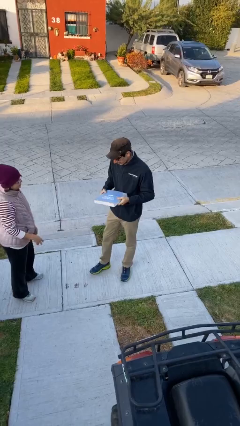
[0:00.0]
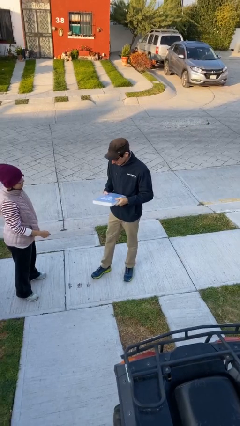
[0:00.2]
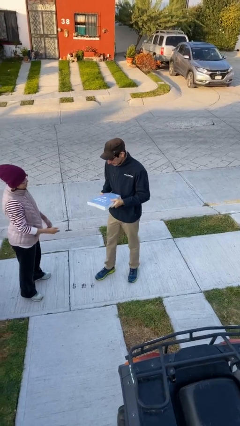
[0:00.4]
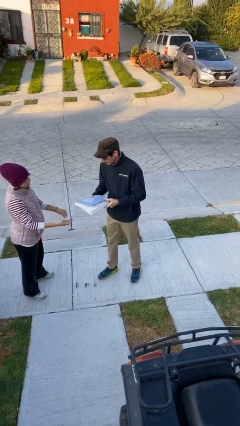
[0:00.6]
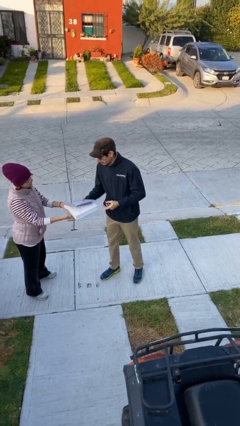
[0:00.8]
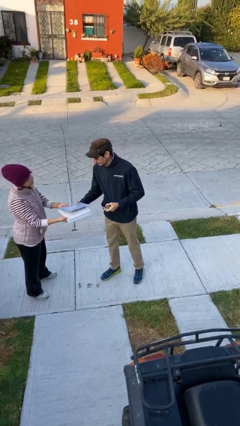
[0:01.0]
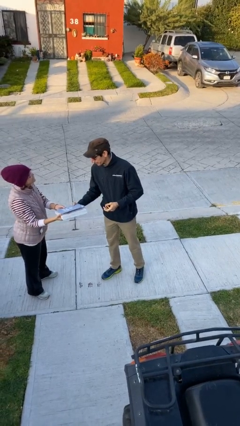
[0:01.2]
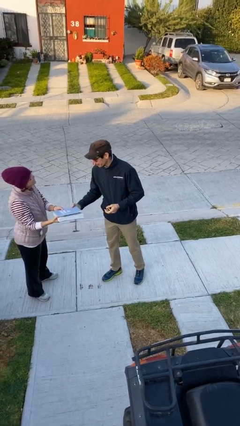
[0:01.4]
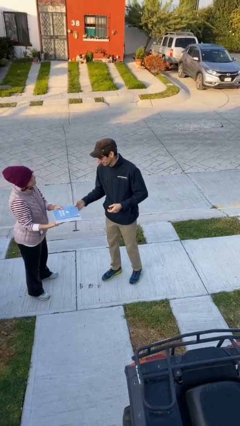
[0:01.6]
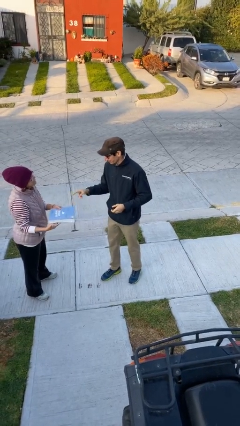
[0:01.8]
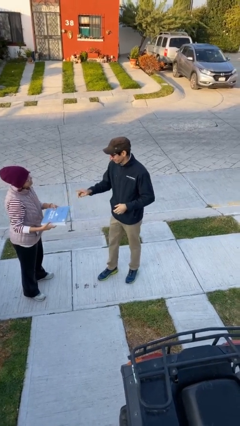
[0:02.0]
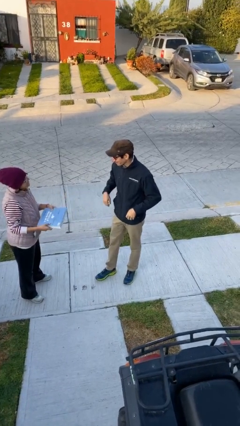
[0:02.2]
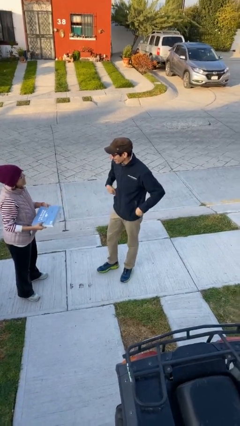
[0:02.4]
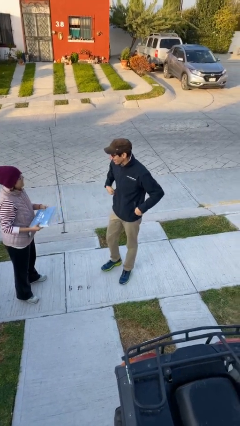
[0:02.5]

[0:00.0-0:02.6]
person transfers object to person

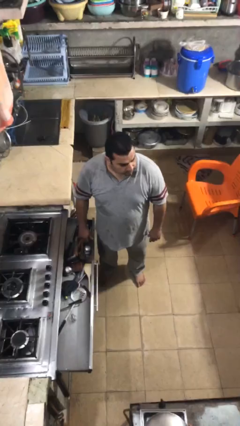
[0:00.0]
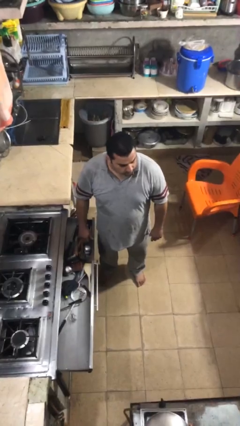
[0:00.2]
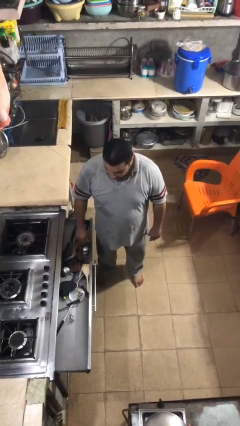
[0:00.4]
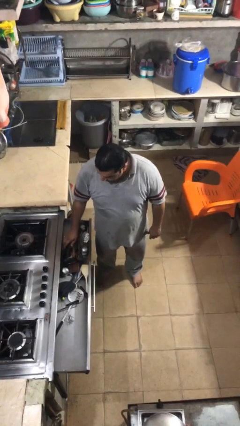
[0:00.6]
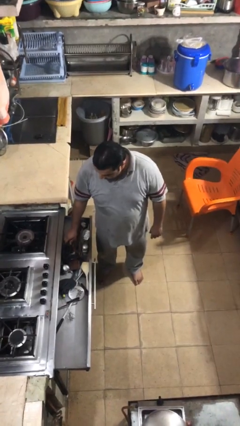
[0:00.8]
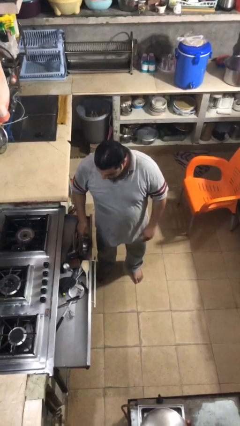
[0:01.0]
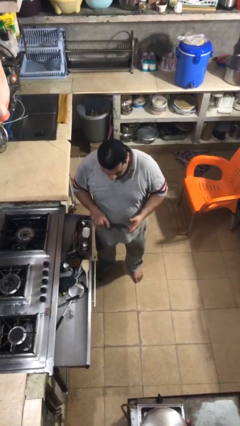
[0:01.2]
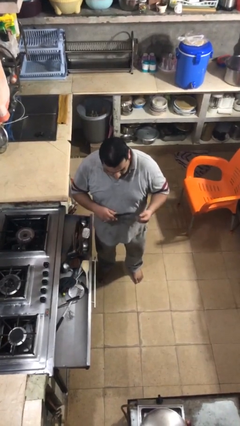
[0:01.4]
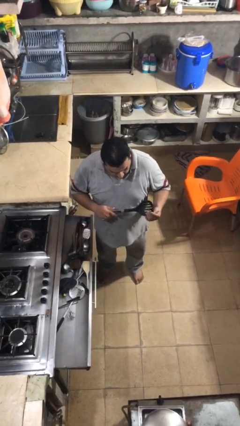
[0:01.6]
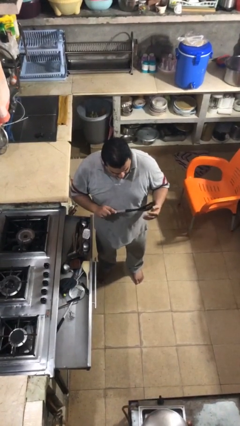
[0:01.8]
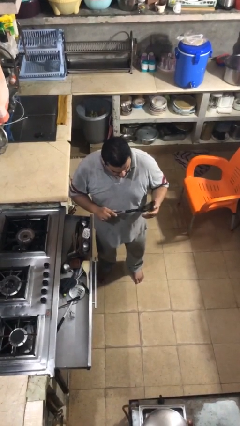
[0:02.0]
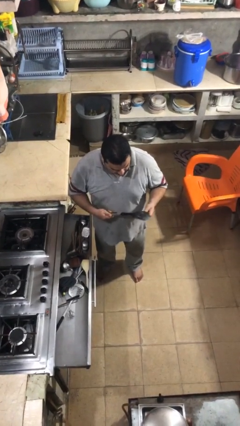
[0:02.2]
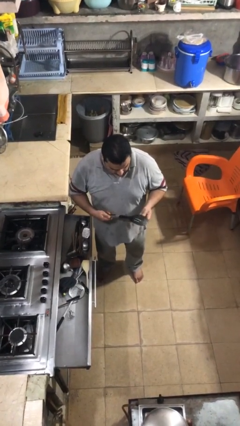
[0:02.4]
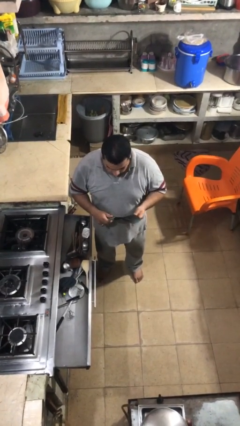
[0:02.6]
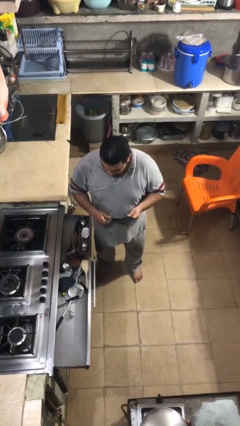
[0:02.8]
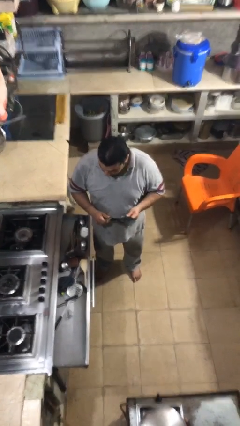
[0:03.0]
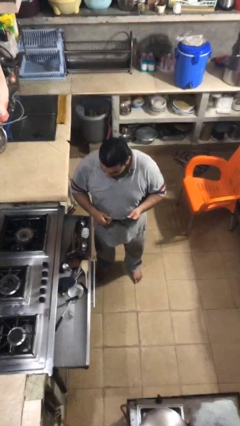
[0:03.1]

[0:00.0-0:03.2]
person takes object from kitchen drawer

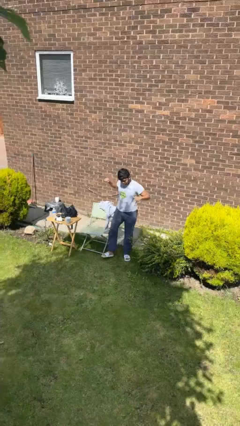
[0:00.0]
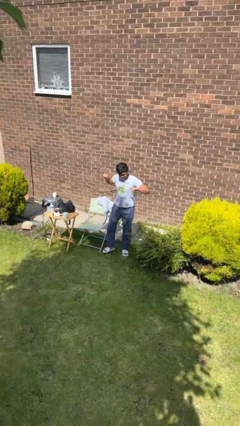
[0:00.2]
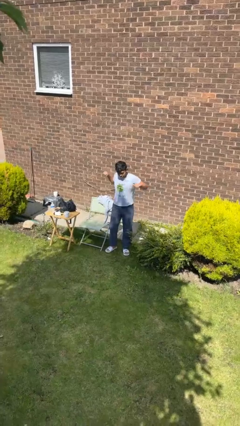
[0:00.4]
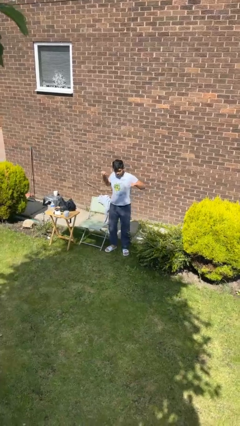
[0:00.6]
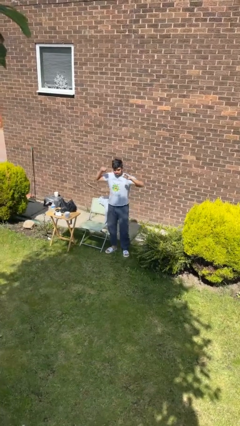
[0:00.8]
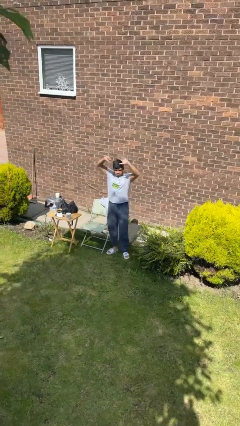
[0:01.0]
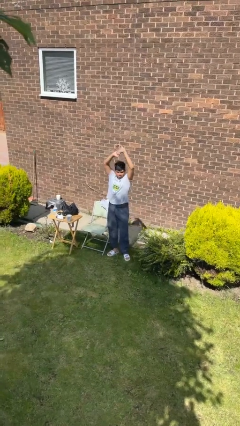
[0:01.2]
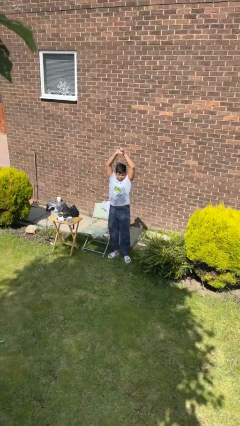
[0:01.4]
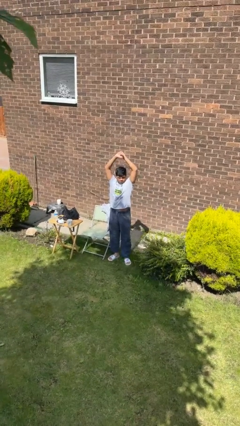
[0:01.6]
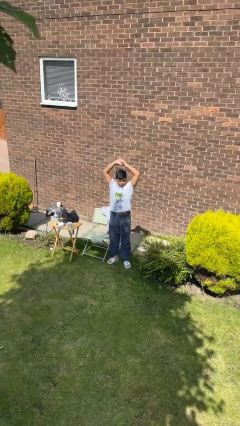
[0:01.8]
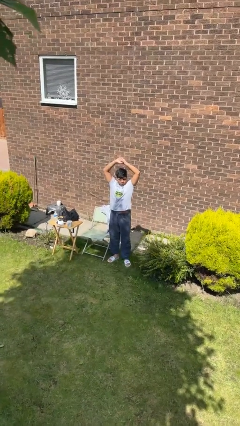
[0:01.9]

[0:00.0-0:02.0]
person stretches arms over head

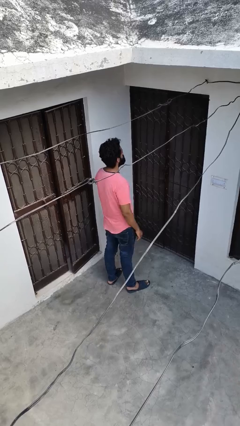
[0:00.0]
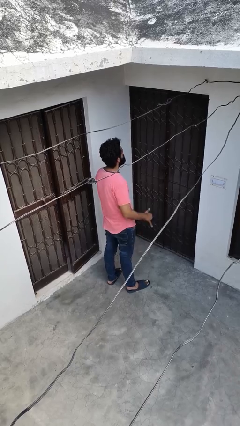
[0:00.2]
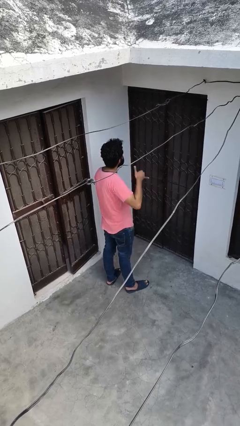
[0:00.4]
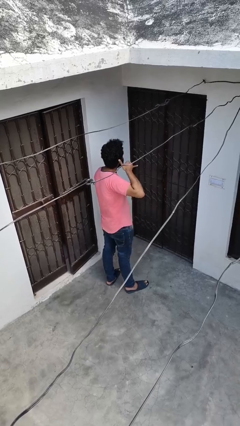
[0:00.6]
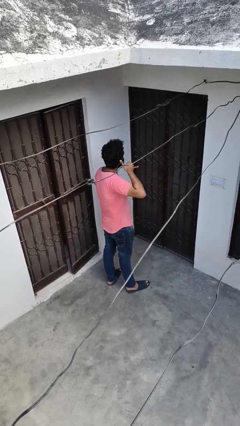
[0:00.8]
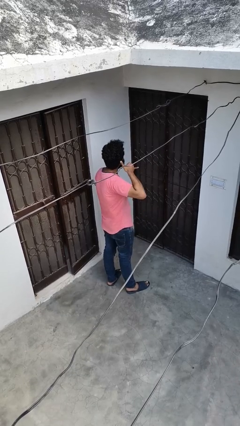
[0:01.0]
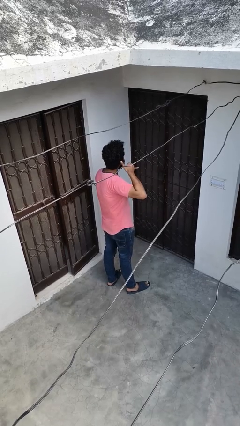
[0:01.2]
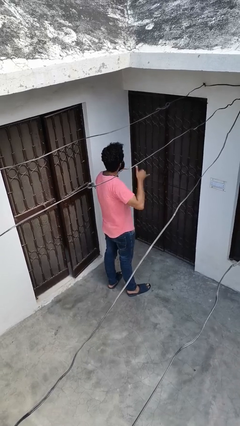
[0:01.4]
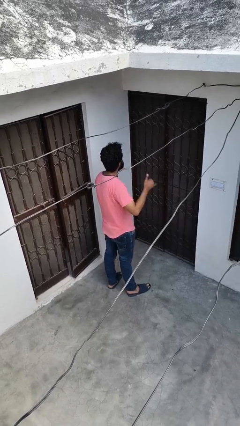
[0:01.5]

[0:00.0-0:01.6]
person gestures call me

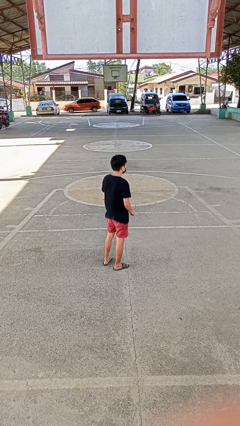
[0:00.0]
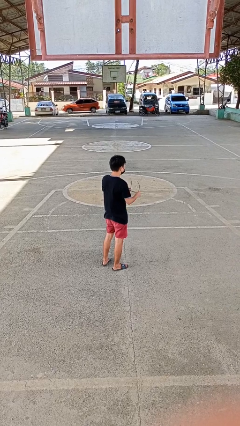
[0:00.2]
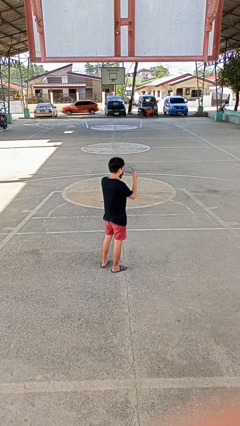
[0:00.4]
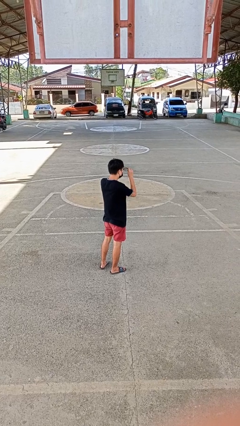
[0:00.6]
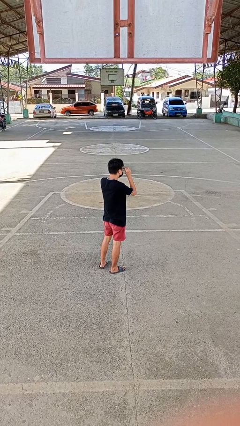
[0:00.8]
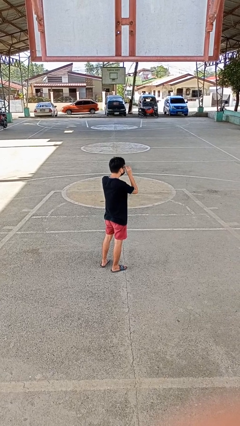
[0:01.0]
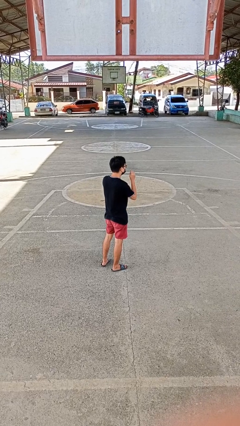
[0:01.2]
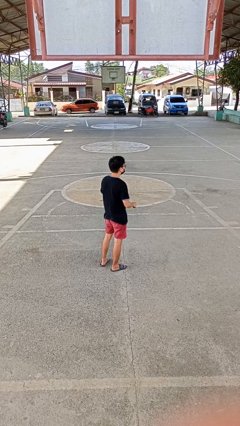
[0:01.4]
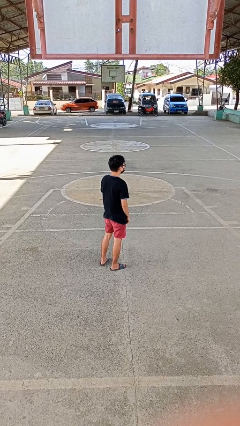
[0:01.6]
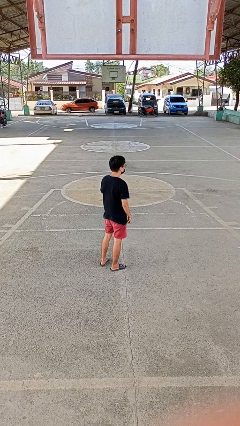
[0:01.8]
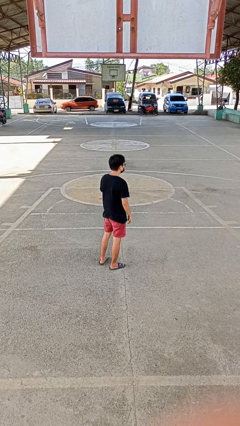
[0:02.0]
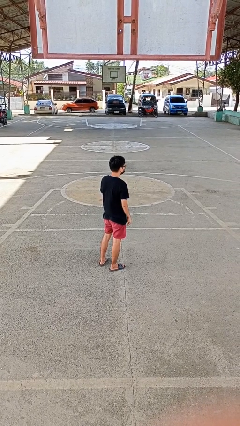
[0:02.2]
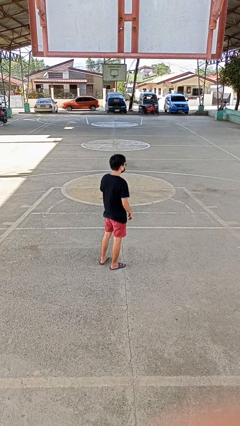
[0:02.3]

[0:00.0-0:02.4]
person puts on glasses

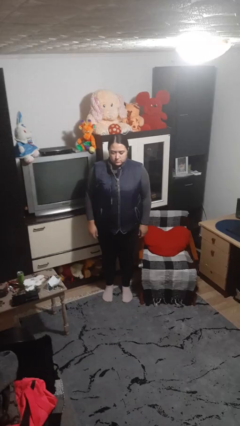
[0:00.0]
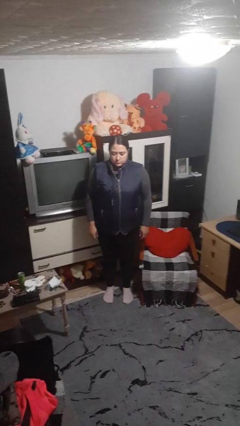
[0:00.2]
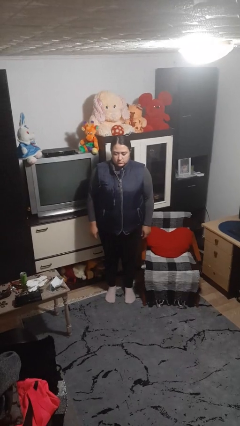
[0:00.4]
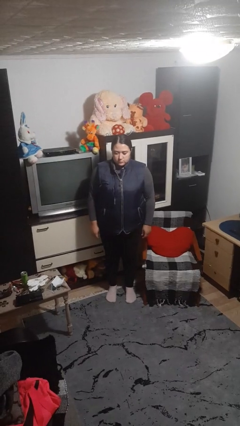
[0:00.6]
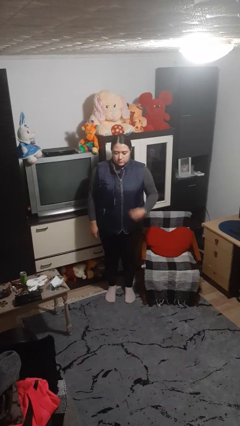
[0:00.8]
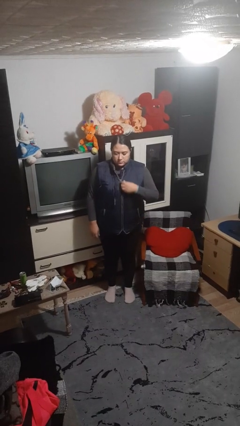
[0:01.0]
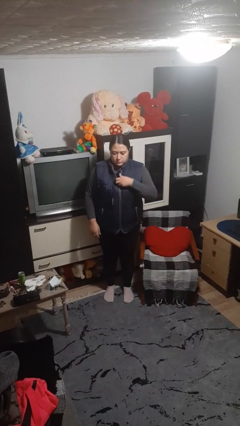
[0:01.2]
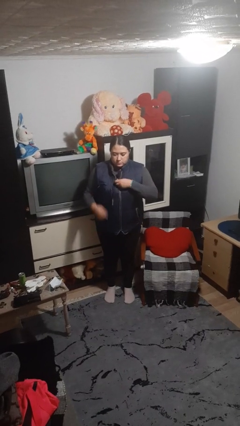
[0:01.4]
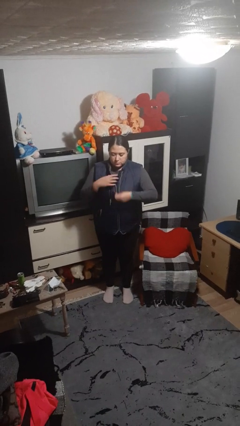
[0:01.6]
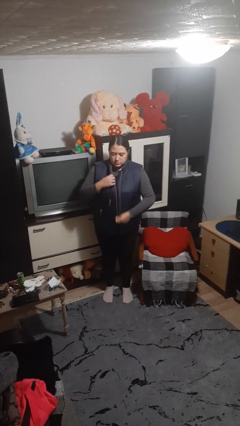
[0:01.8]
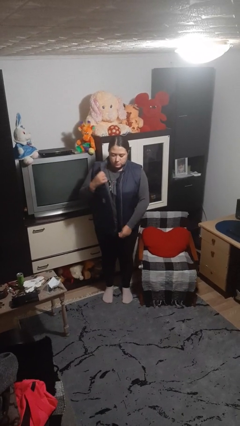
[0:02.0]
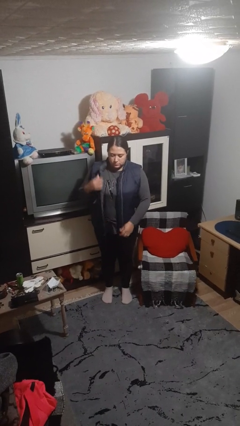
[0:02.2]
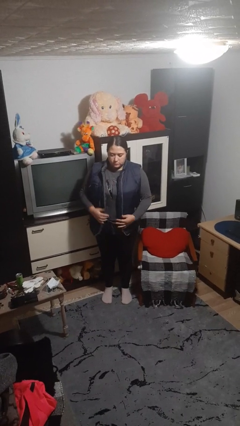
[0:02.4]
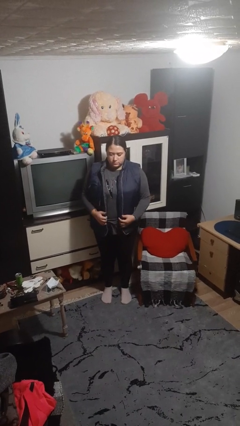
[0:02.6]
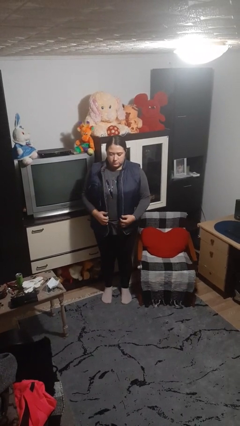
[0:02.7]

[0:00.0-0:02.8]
person unzips jacket

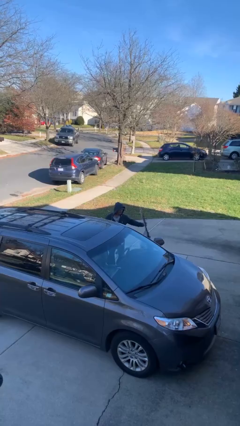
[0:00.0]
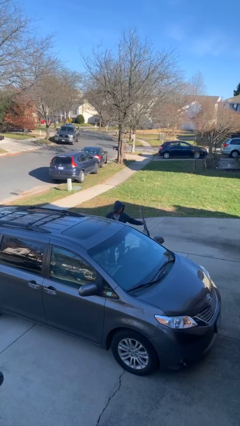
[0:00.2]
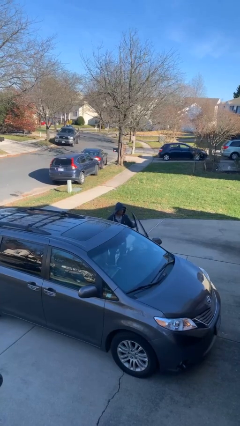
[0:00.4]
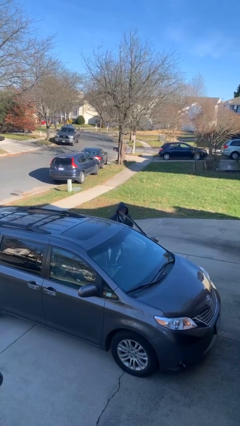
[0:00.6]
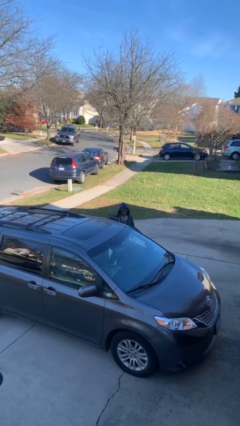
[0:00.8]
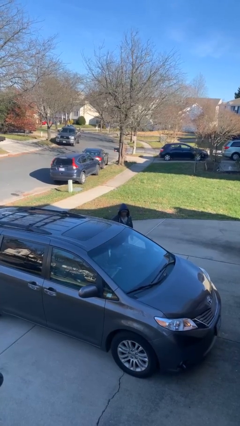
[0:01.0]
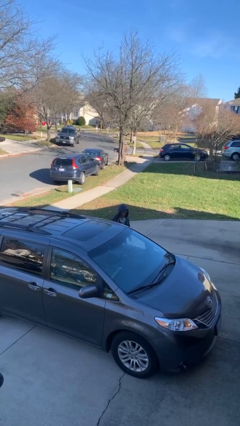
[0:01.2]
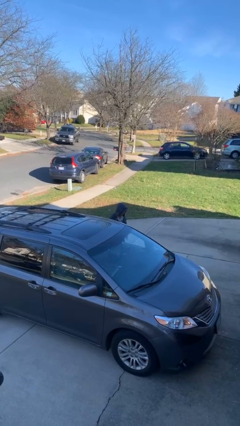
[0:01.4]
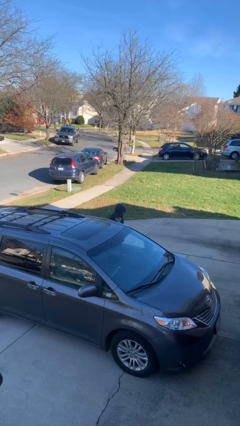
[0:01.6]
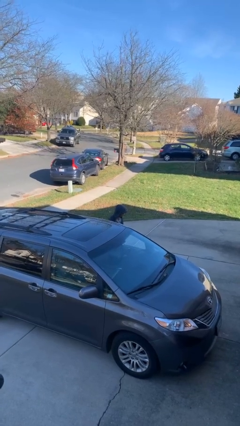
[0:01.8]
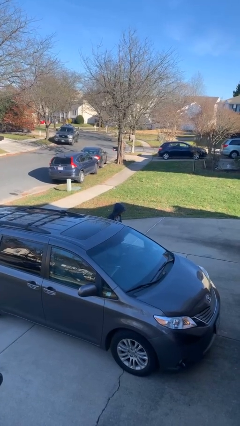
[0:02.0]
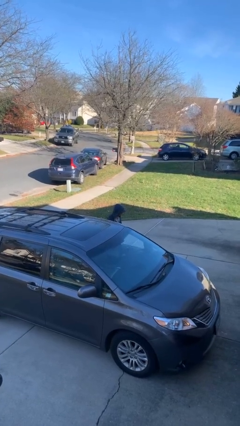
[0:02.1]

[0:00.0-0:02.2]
person closes car door

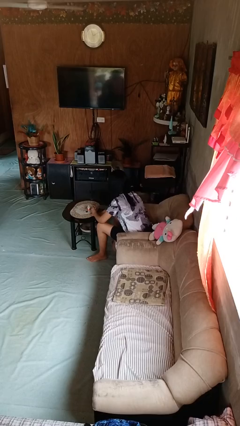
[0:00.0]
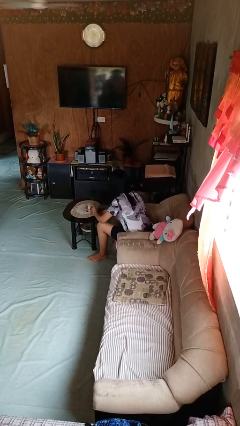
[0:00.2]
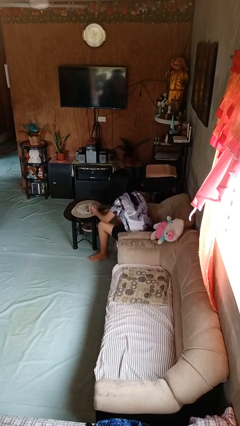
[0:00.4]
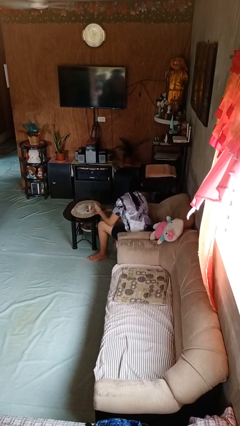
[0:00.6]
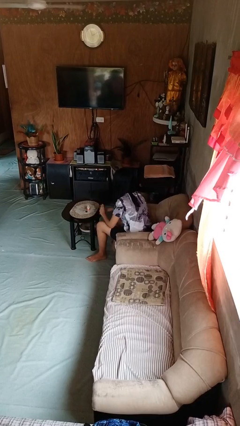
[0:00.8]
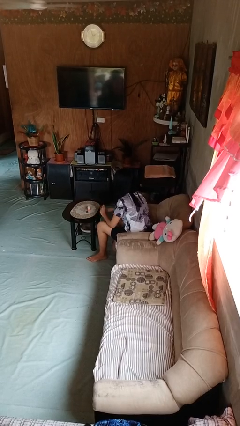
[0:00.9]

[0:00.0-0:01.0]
person paints fingernails
